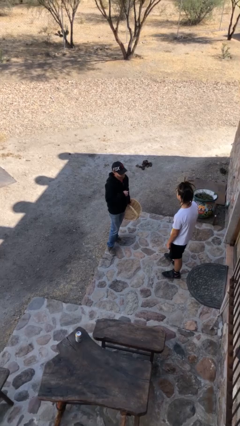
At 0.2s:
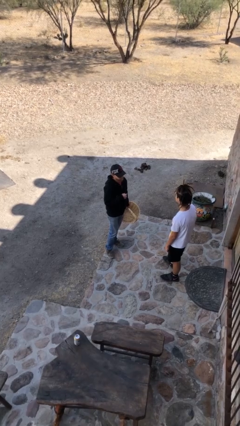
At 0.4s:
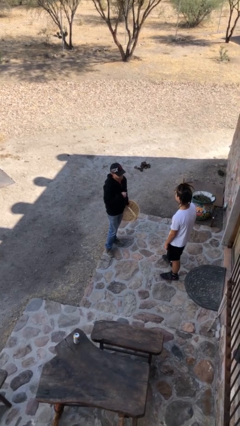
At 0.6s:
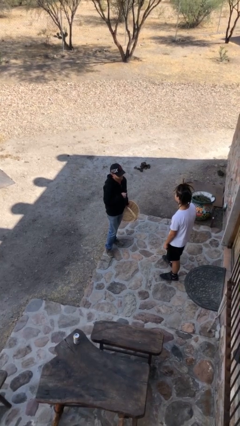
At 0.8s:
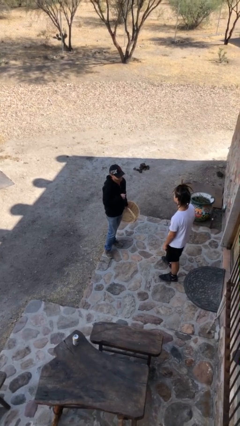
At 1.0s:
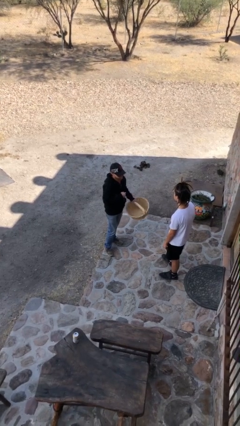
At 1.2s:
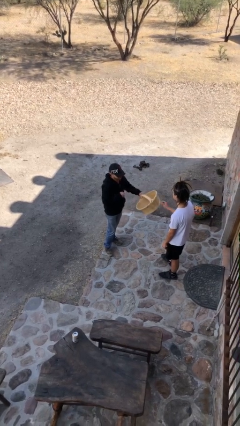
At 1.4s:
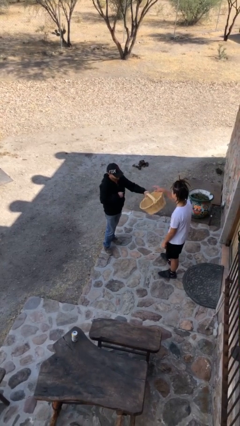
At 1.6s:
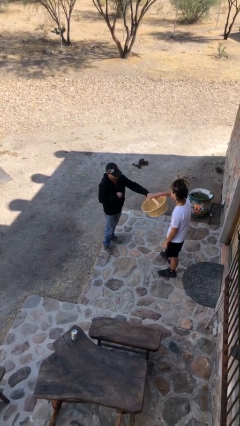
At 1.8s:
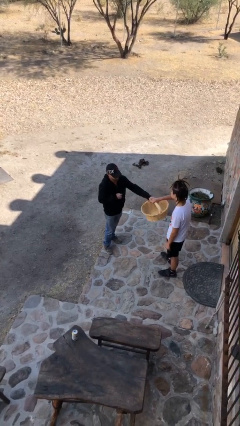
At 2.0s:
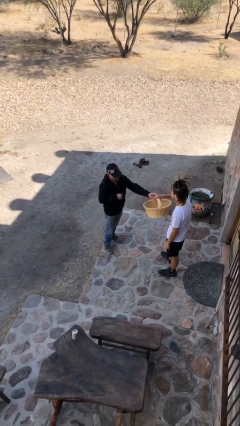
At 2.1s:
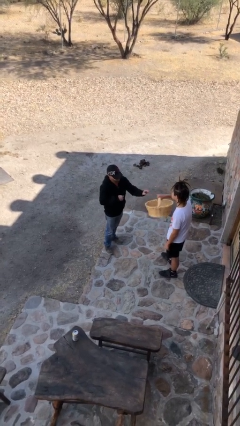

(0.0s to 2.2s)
person transfers object to person

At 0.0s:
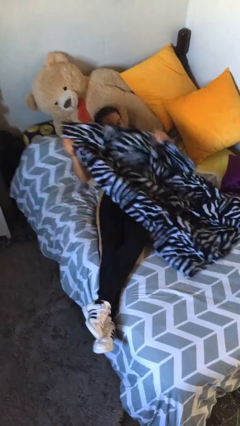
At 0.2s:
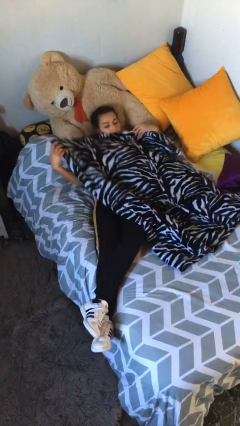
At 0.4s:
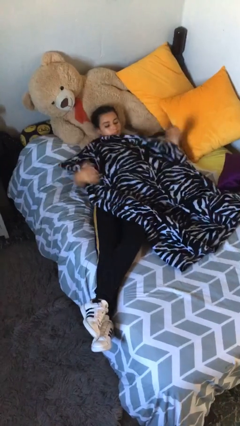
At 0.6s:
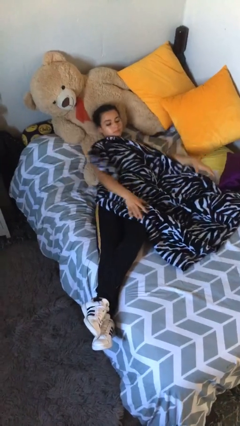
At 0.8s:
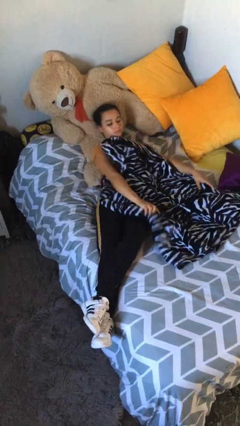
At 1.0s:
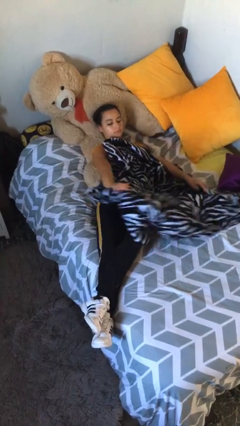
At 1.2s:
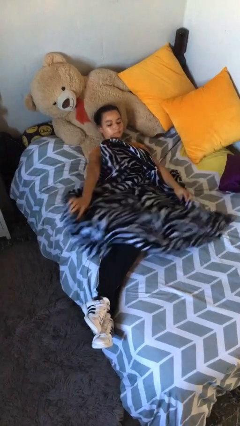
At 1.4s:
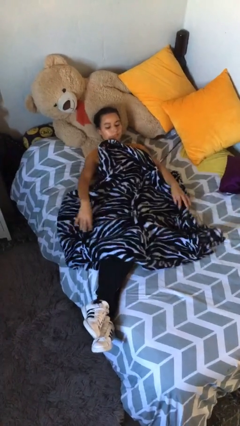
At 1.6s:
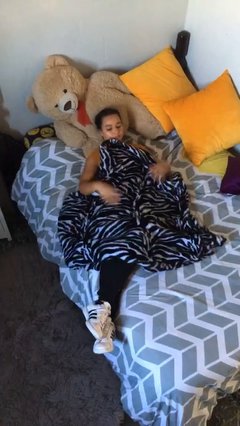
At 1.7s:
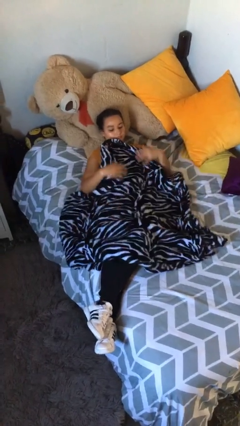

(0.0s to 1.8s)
person covers with bedsheets

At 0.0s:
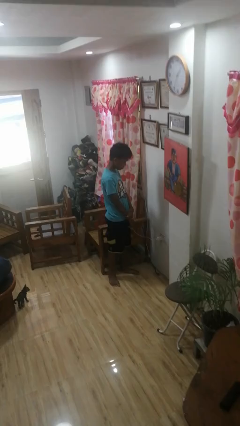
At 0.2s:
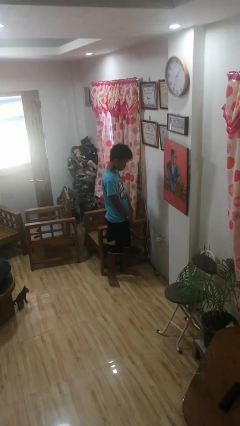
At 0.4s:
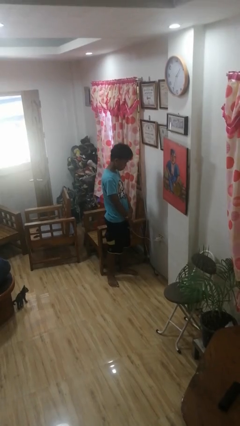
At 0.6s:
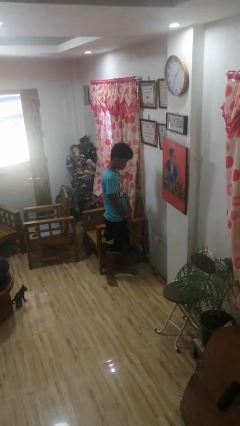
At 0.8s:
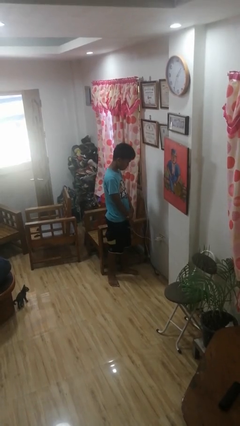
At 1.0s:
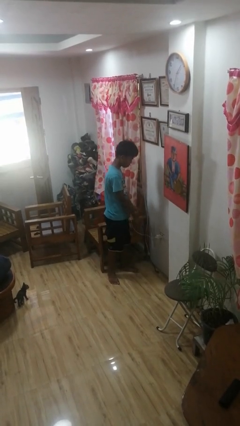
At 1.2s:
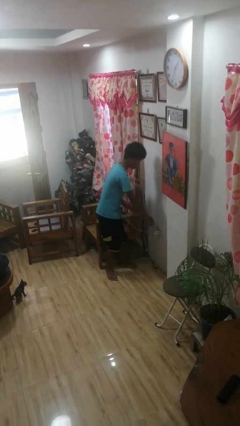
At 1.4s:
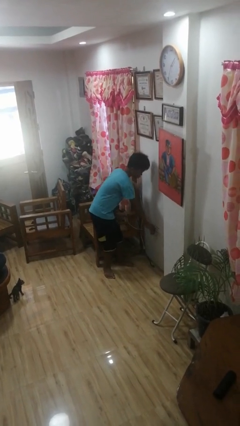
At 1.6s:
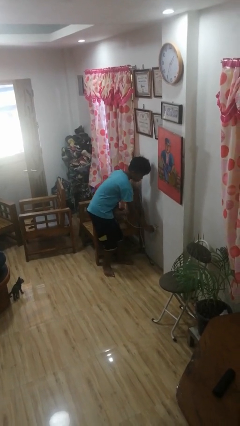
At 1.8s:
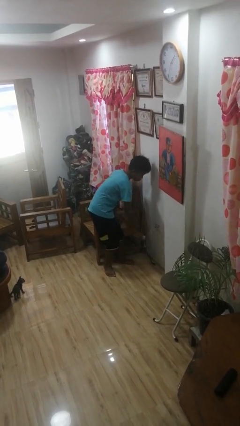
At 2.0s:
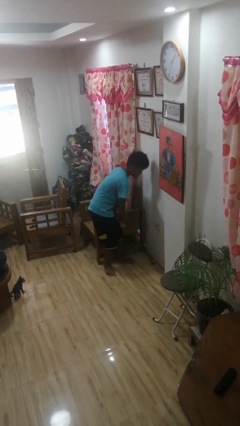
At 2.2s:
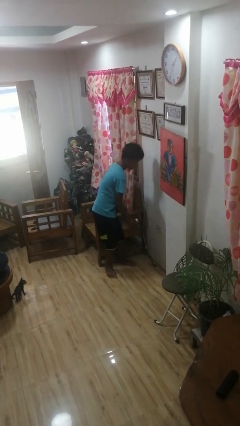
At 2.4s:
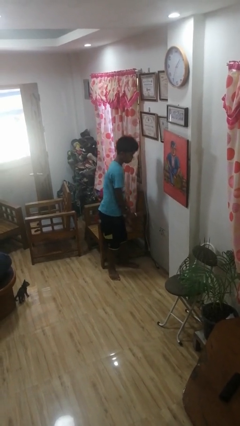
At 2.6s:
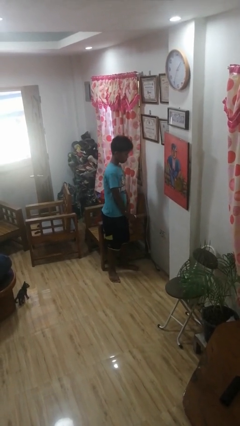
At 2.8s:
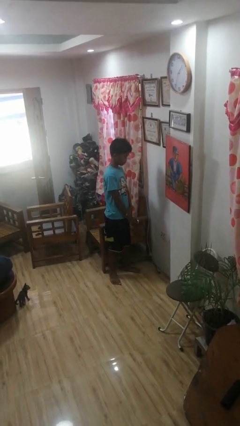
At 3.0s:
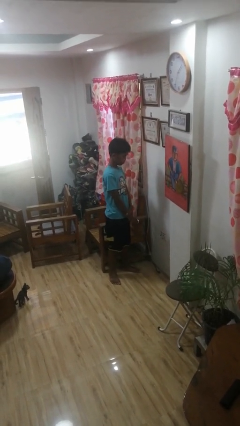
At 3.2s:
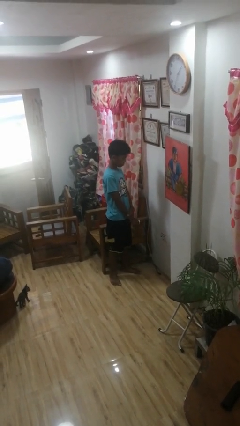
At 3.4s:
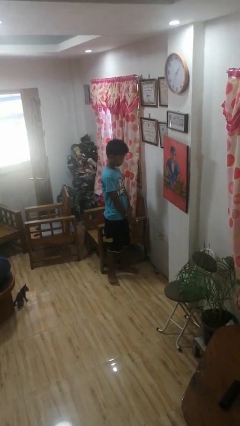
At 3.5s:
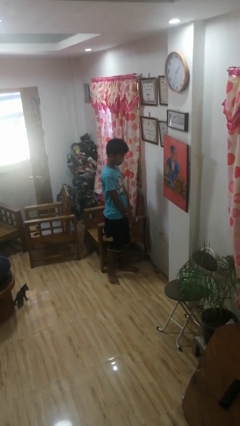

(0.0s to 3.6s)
person unplugs from electrical socket

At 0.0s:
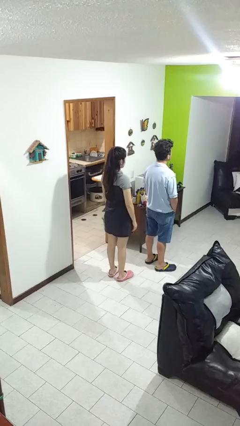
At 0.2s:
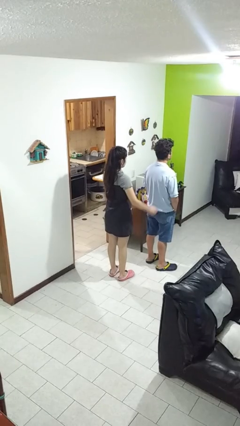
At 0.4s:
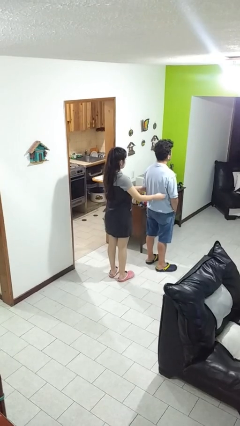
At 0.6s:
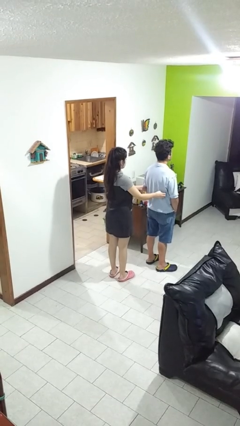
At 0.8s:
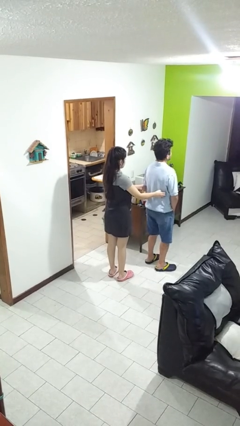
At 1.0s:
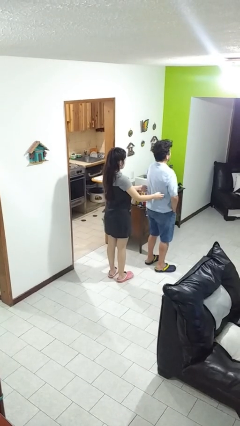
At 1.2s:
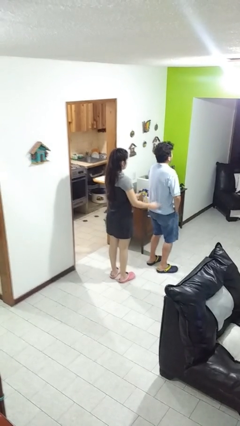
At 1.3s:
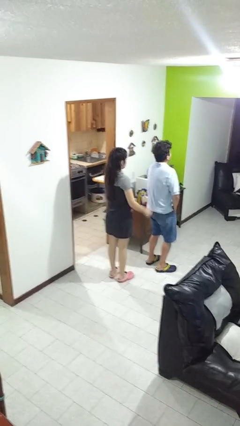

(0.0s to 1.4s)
person tickles person

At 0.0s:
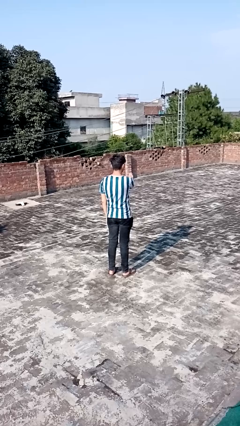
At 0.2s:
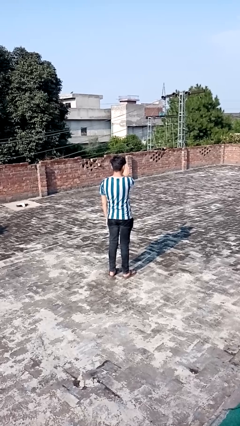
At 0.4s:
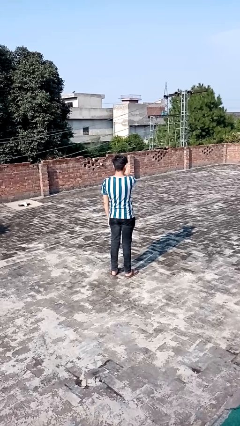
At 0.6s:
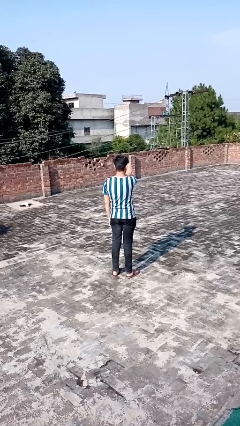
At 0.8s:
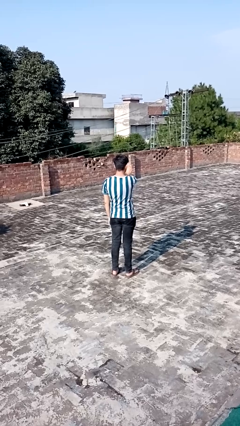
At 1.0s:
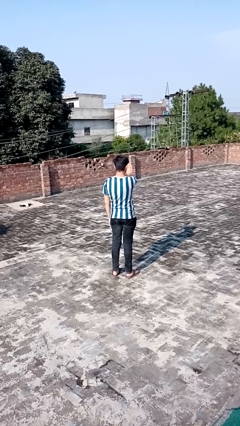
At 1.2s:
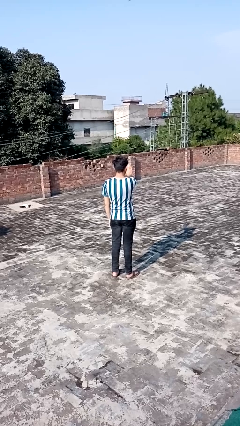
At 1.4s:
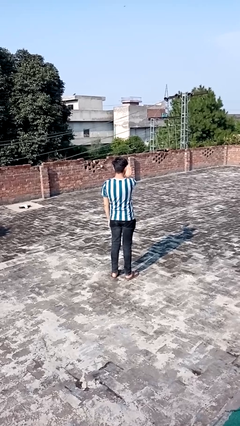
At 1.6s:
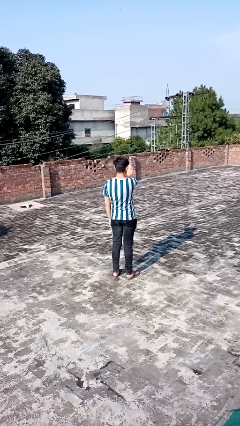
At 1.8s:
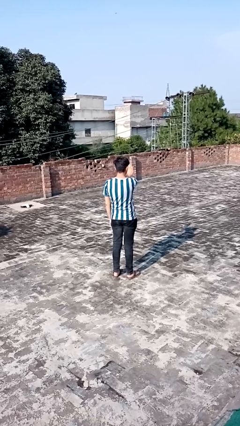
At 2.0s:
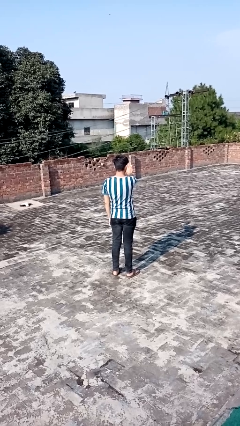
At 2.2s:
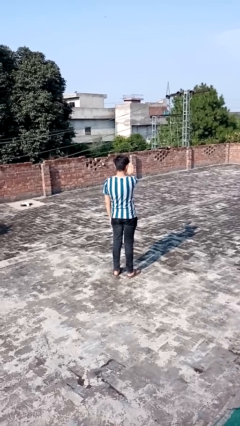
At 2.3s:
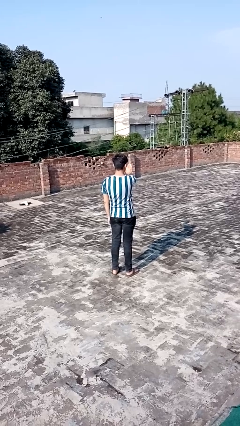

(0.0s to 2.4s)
person gestures stop

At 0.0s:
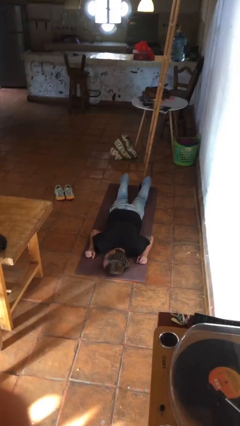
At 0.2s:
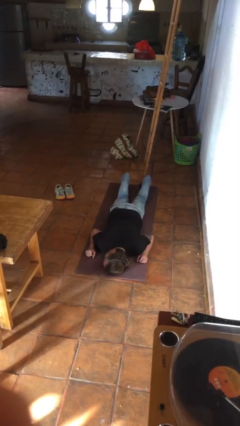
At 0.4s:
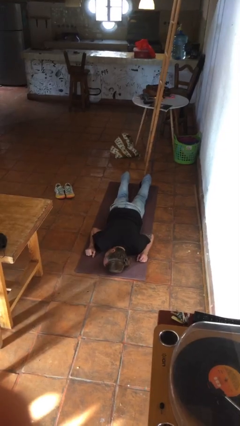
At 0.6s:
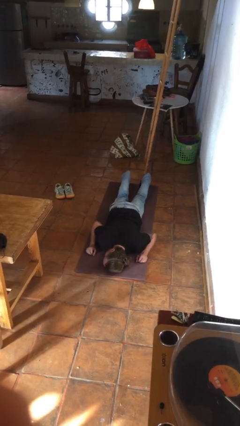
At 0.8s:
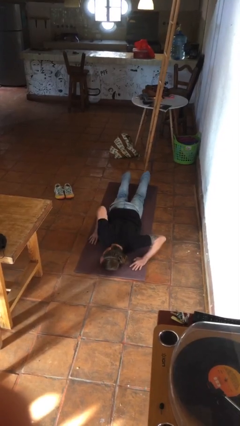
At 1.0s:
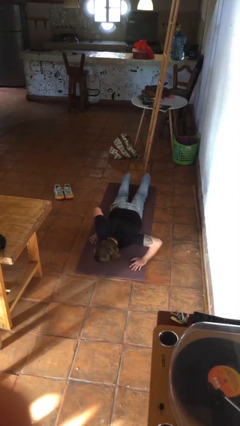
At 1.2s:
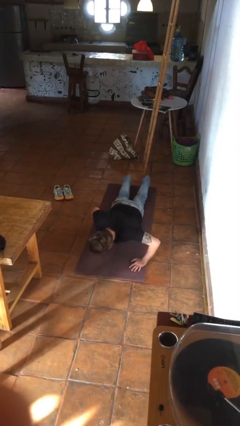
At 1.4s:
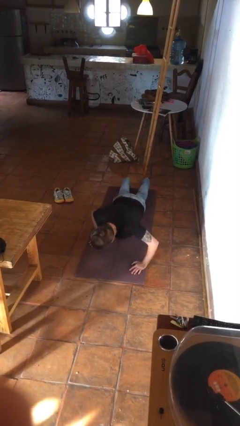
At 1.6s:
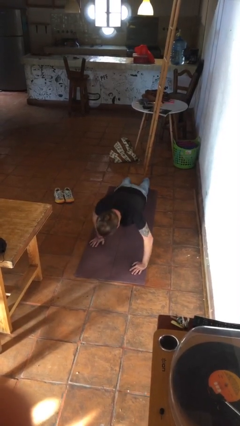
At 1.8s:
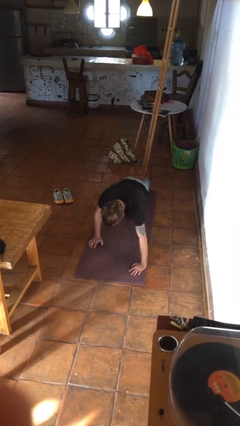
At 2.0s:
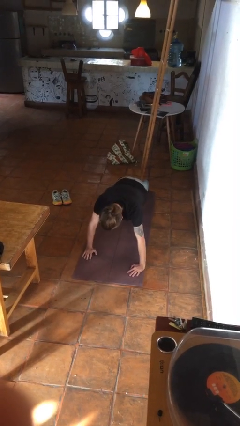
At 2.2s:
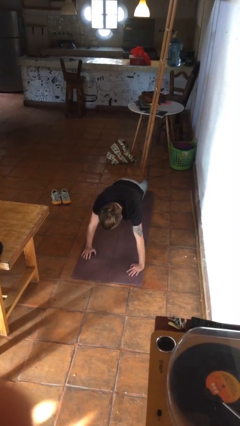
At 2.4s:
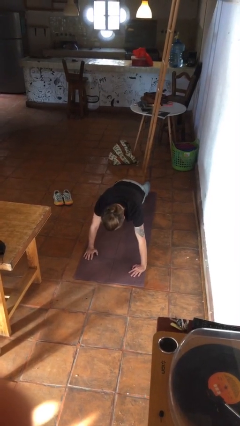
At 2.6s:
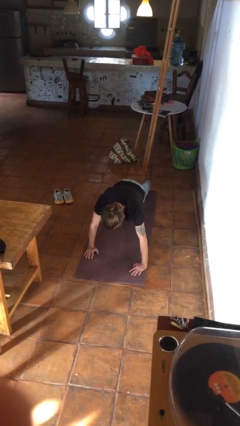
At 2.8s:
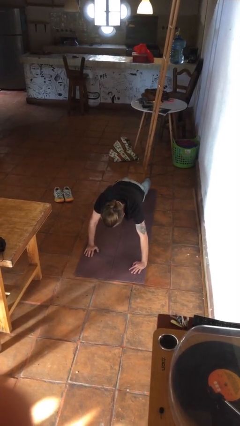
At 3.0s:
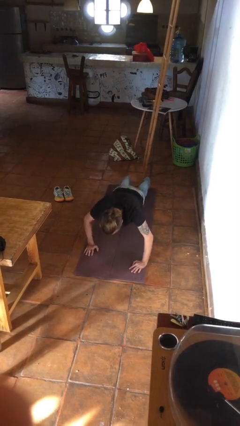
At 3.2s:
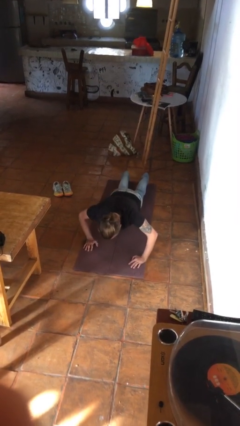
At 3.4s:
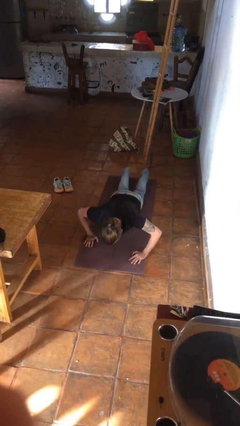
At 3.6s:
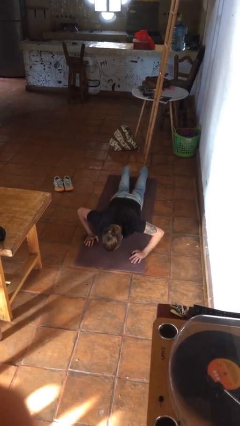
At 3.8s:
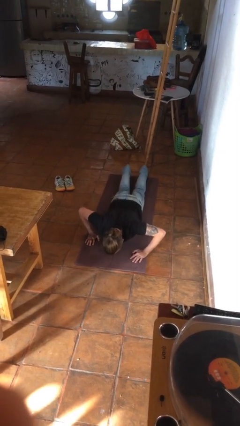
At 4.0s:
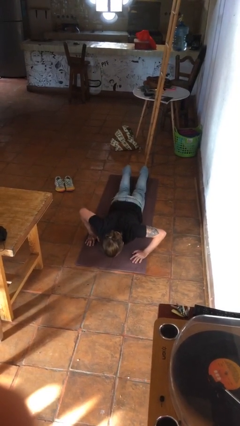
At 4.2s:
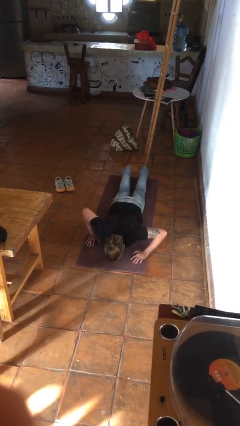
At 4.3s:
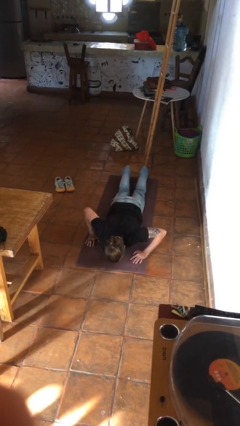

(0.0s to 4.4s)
person exercises with pushup

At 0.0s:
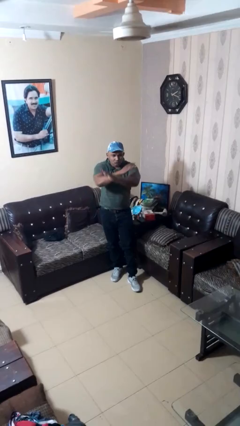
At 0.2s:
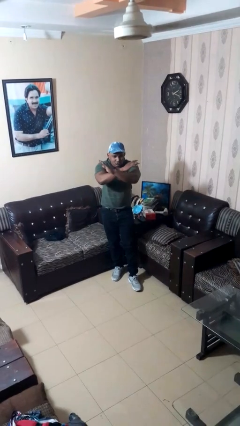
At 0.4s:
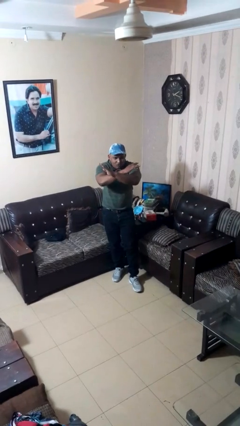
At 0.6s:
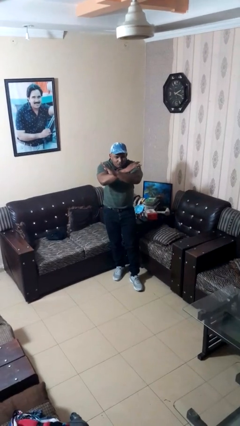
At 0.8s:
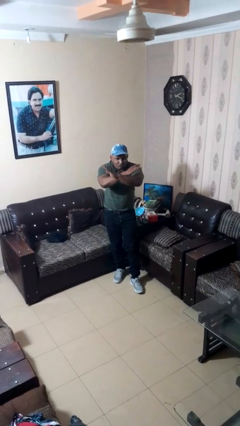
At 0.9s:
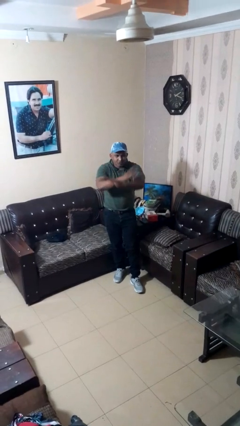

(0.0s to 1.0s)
person gestures arms x

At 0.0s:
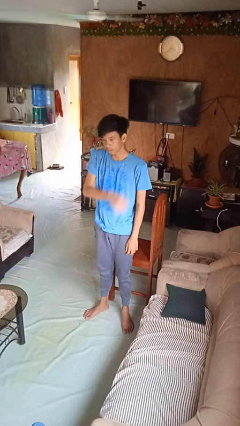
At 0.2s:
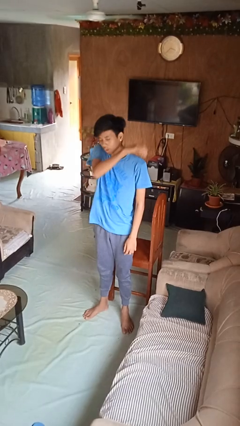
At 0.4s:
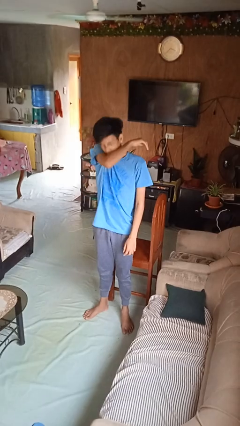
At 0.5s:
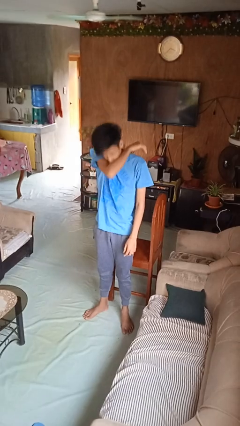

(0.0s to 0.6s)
person sneezes into arm
